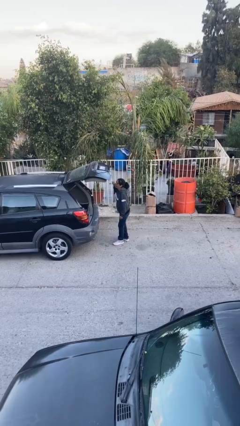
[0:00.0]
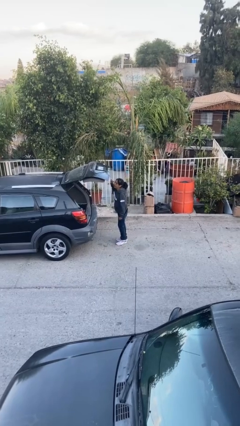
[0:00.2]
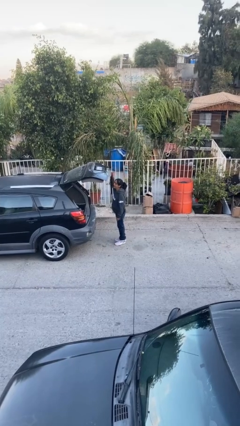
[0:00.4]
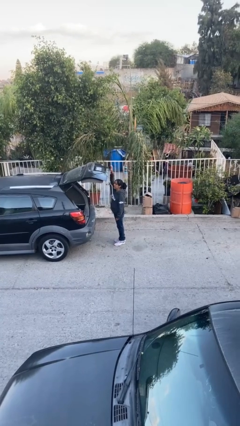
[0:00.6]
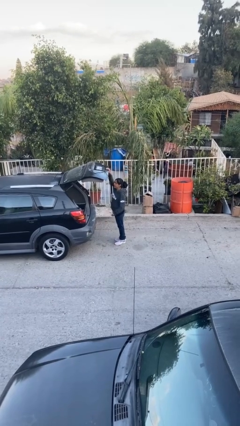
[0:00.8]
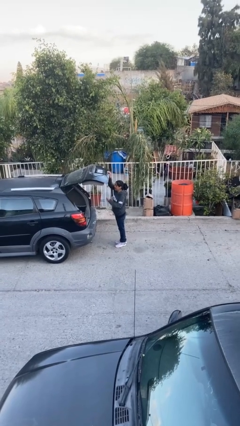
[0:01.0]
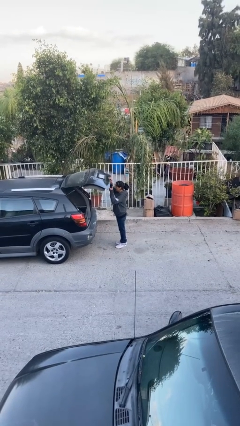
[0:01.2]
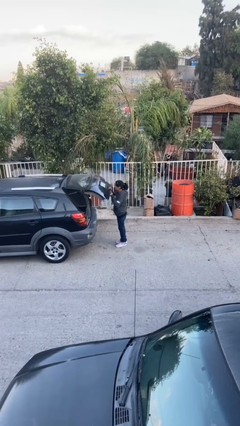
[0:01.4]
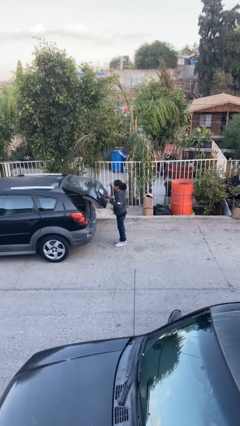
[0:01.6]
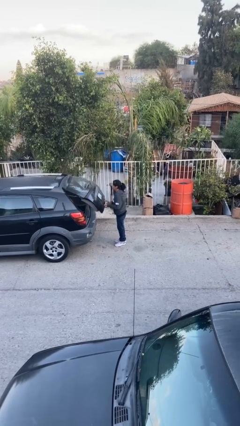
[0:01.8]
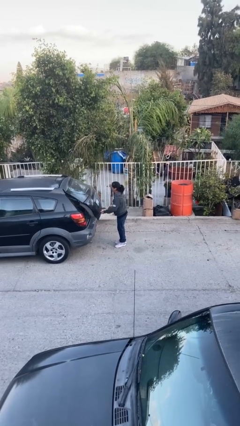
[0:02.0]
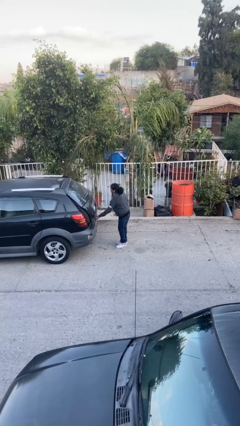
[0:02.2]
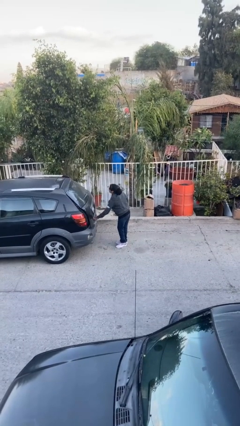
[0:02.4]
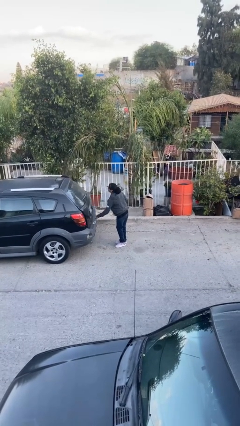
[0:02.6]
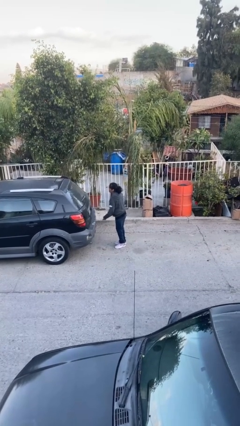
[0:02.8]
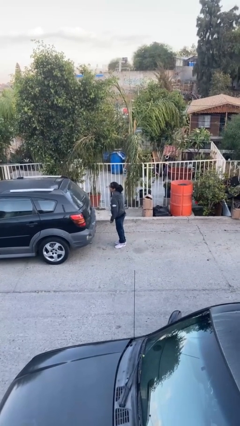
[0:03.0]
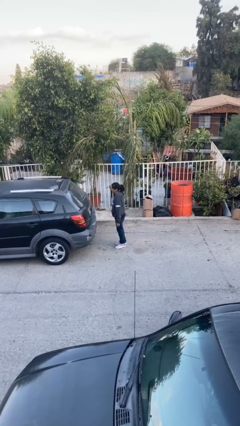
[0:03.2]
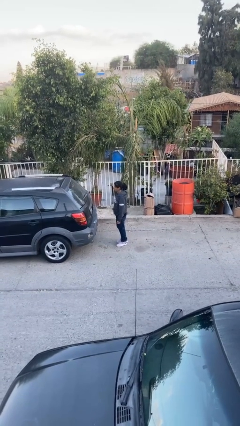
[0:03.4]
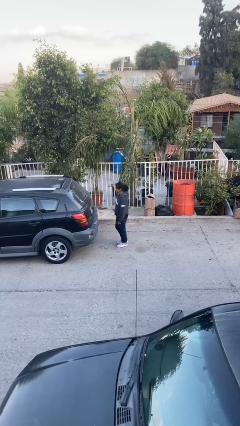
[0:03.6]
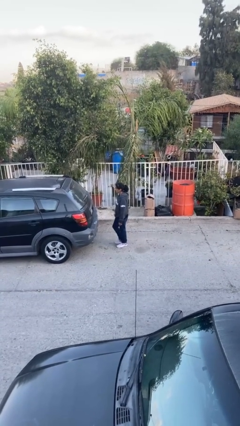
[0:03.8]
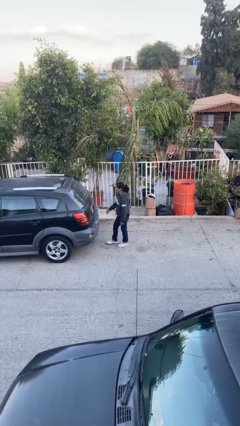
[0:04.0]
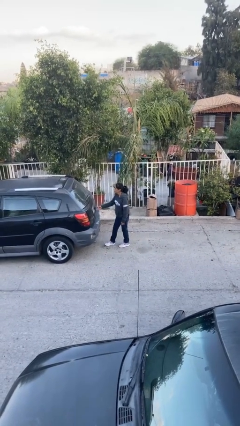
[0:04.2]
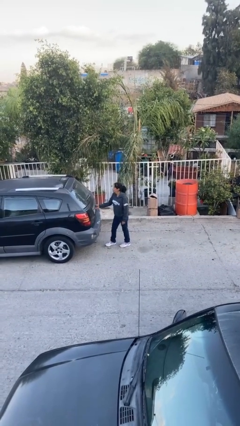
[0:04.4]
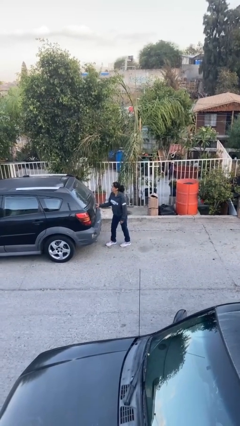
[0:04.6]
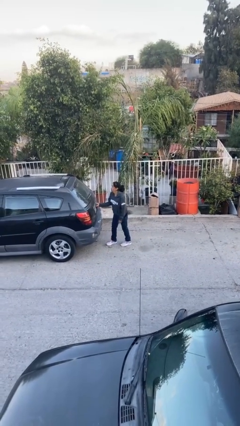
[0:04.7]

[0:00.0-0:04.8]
person opens car trunk

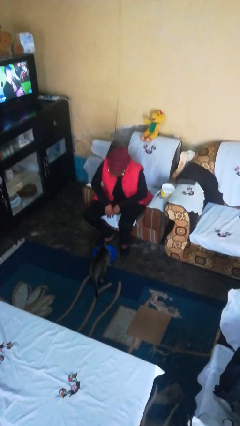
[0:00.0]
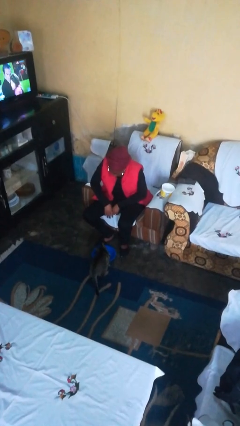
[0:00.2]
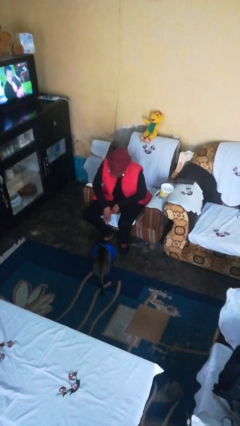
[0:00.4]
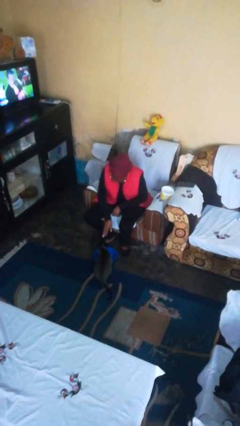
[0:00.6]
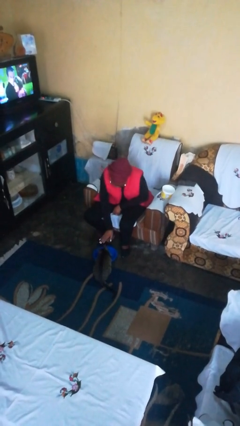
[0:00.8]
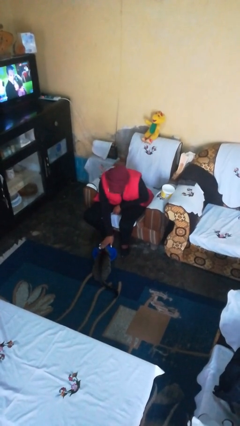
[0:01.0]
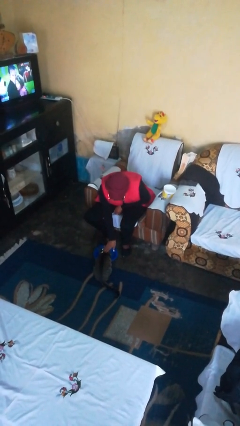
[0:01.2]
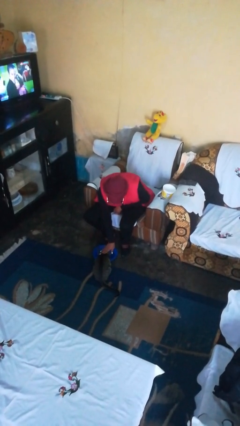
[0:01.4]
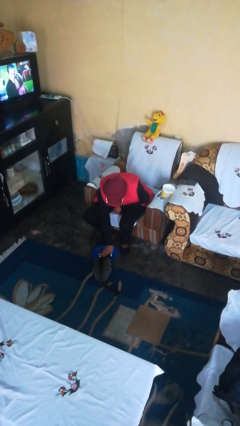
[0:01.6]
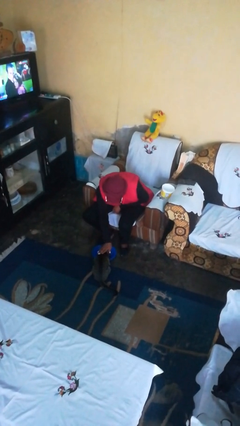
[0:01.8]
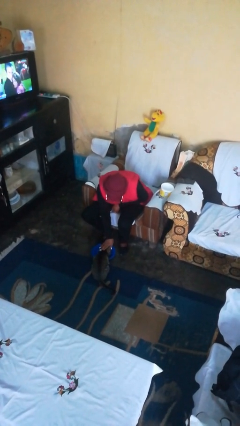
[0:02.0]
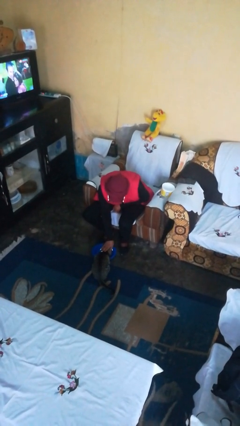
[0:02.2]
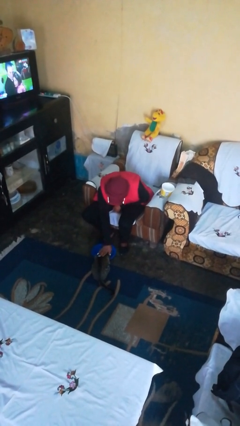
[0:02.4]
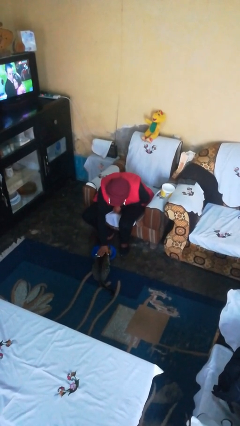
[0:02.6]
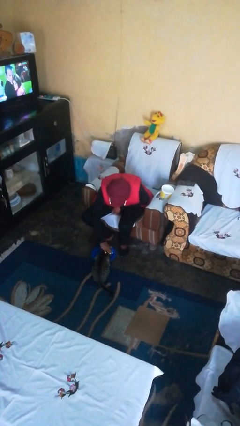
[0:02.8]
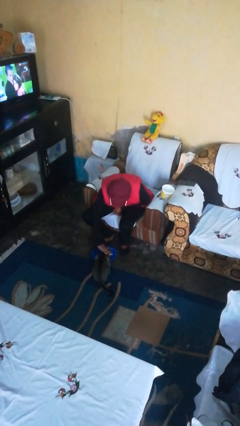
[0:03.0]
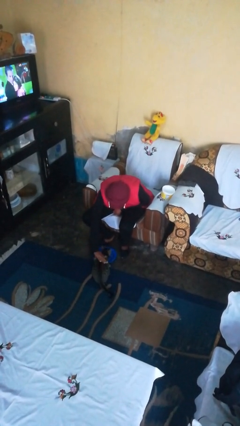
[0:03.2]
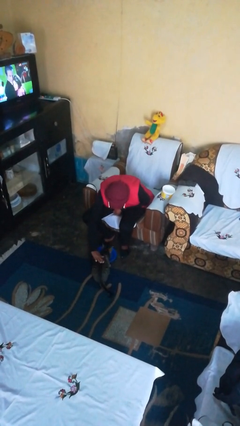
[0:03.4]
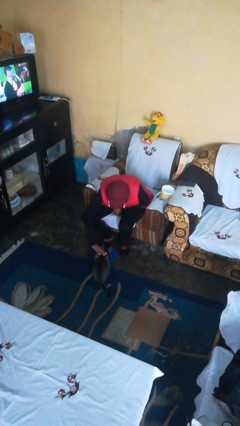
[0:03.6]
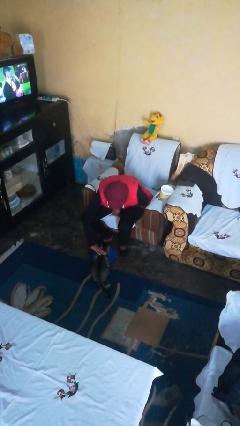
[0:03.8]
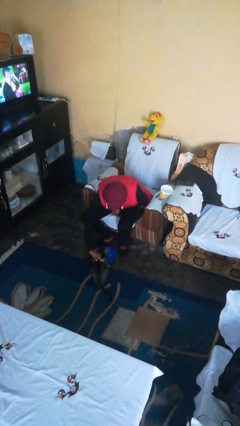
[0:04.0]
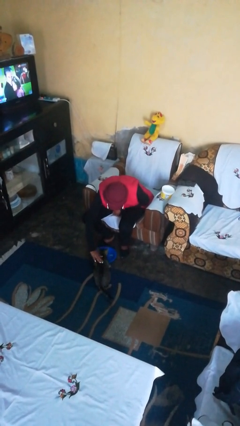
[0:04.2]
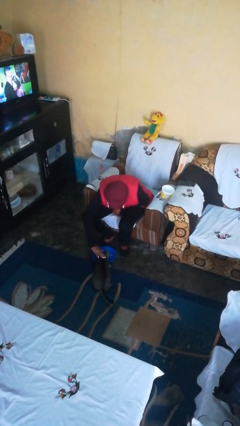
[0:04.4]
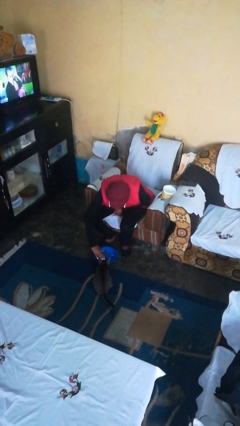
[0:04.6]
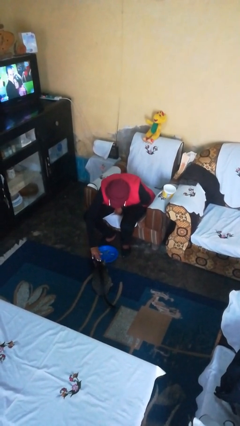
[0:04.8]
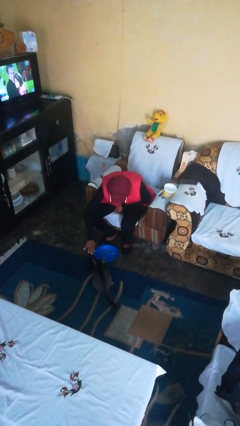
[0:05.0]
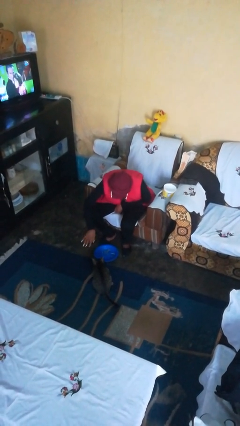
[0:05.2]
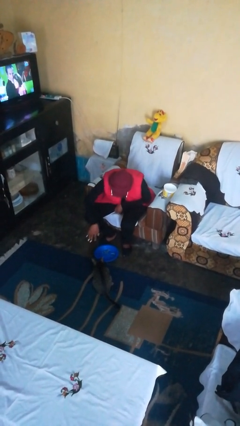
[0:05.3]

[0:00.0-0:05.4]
person pets cat

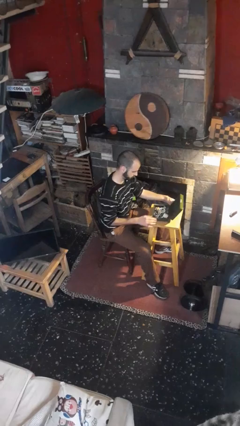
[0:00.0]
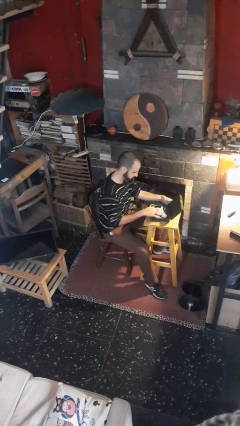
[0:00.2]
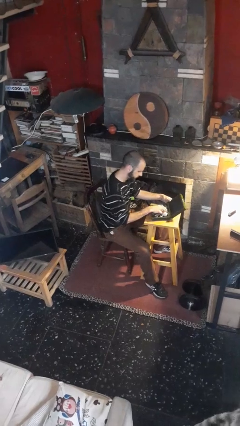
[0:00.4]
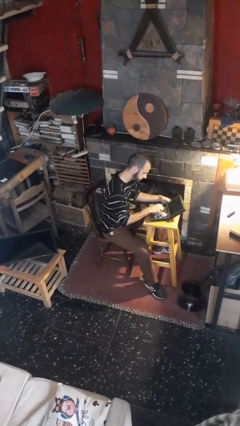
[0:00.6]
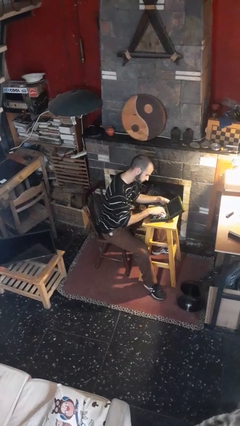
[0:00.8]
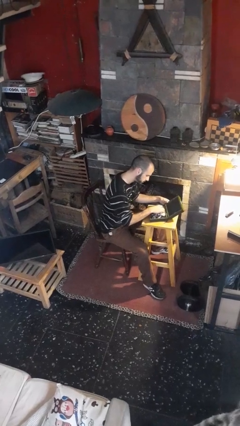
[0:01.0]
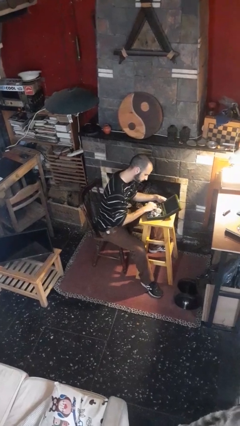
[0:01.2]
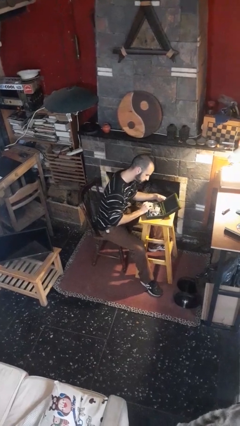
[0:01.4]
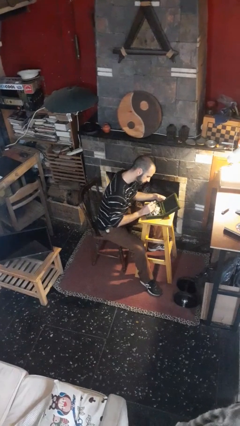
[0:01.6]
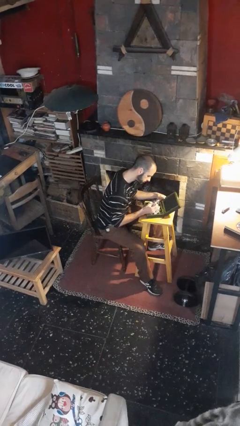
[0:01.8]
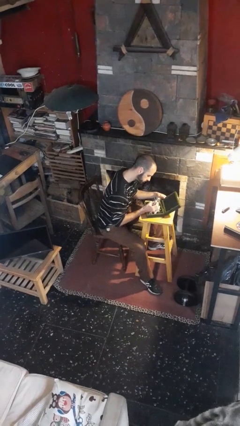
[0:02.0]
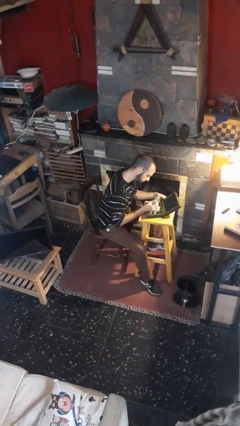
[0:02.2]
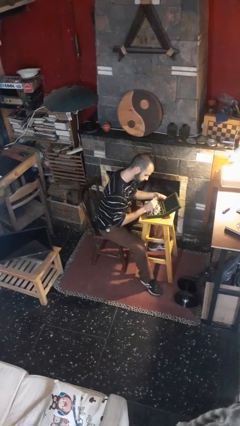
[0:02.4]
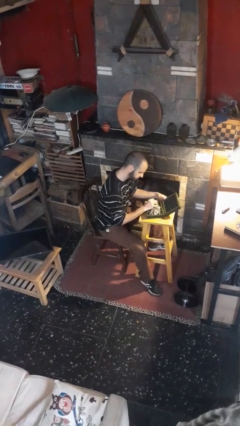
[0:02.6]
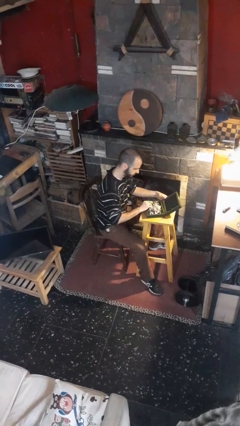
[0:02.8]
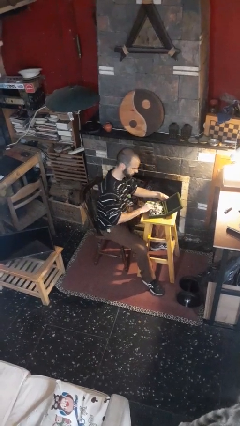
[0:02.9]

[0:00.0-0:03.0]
person searches jewelry box

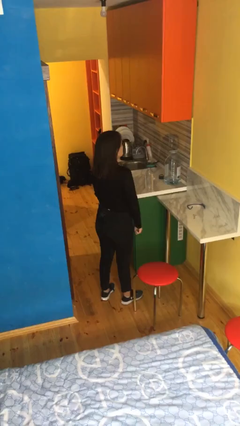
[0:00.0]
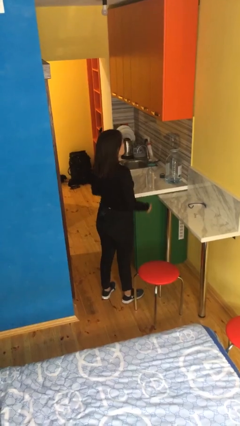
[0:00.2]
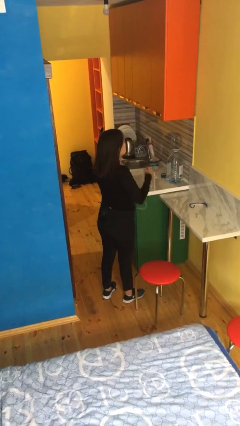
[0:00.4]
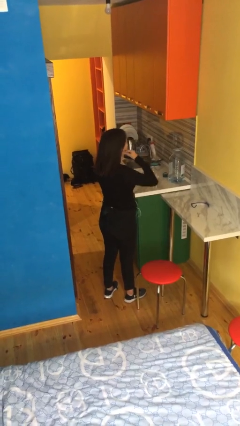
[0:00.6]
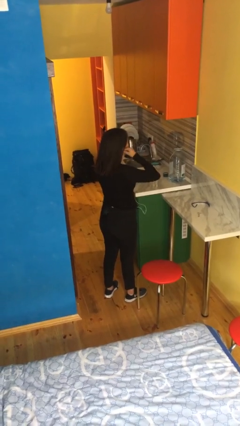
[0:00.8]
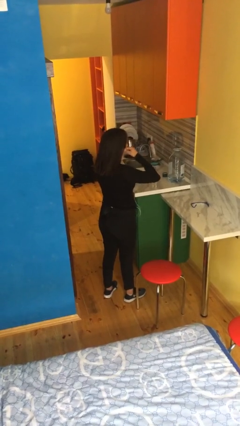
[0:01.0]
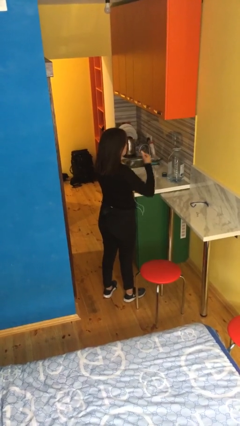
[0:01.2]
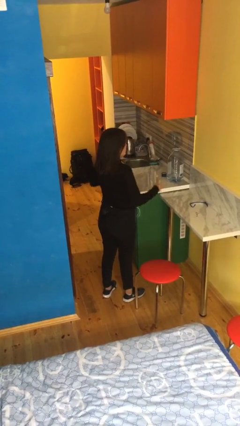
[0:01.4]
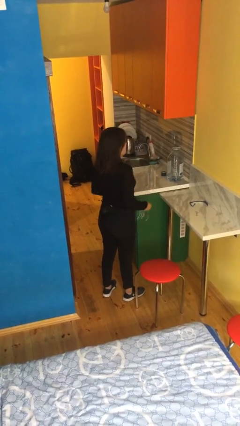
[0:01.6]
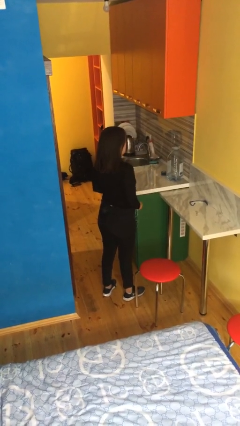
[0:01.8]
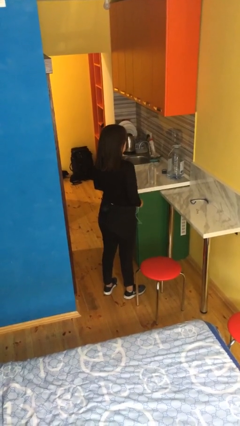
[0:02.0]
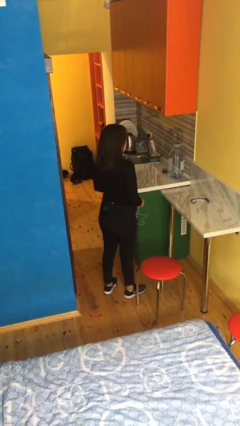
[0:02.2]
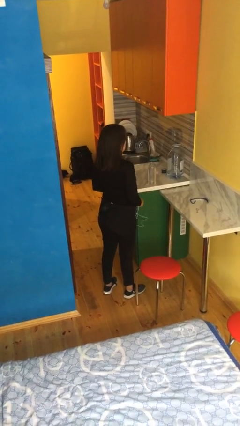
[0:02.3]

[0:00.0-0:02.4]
person takes off headphones

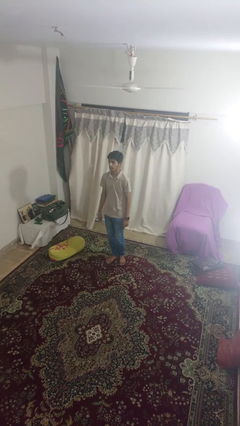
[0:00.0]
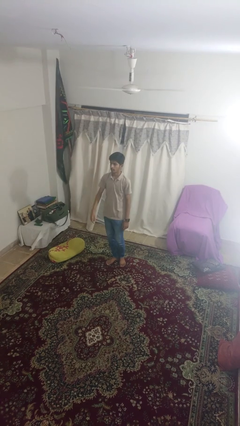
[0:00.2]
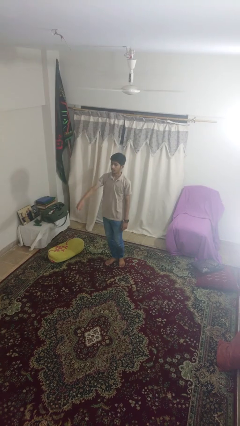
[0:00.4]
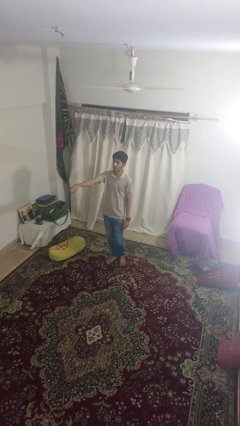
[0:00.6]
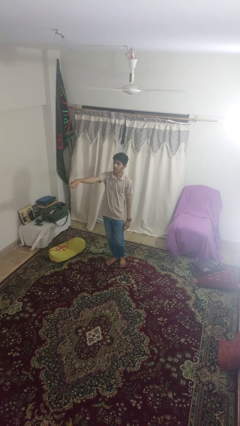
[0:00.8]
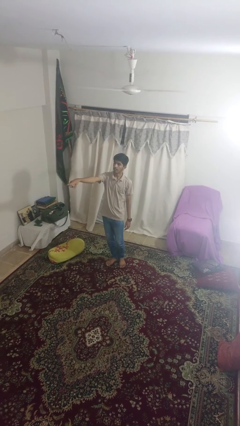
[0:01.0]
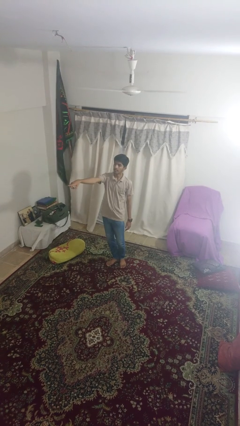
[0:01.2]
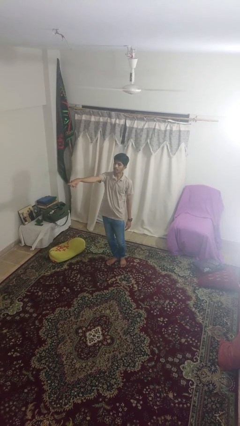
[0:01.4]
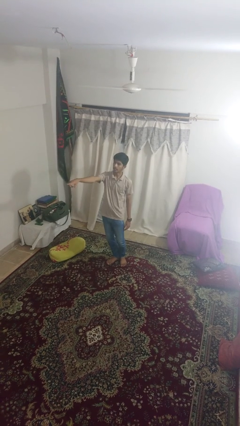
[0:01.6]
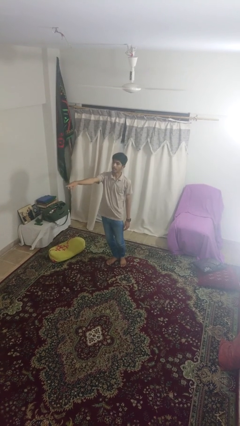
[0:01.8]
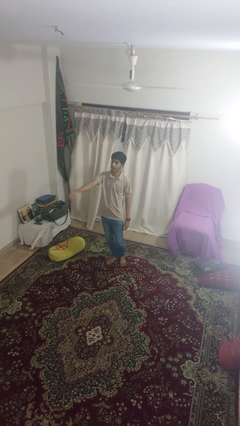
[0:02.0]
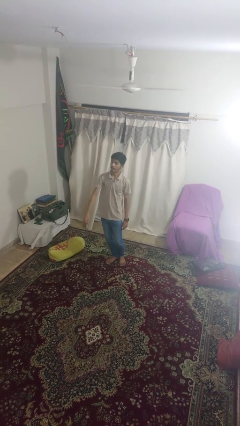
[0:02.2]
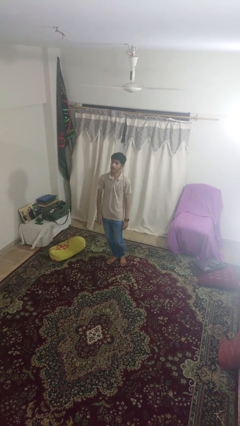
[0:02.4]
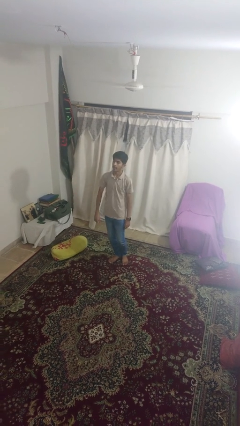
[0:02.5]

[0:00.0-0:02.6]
person points at person
